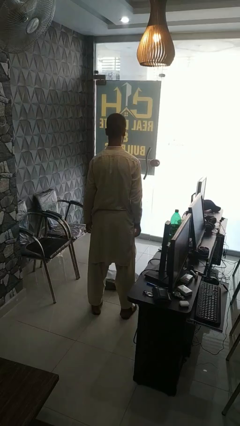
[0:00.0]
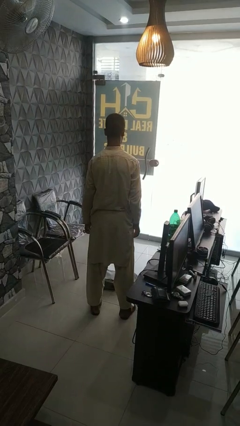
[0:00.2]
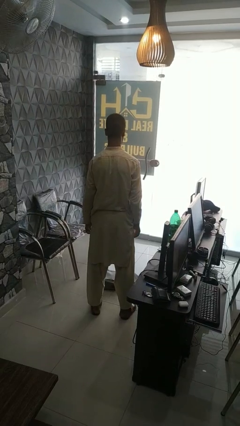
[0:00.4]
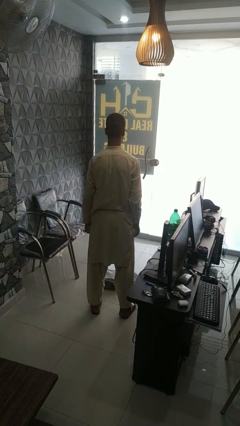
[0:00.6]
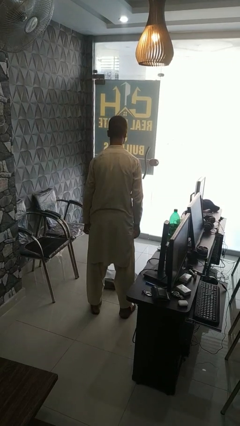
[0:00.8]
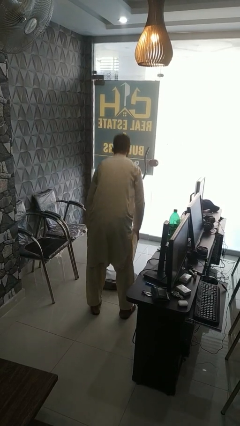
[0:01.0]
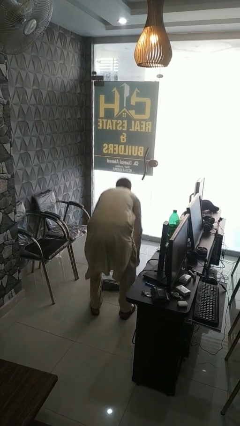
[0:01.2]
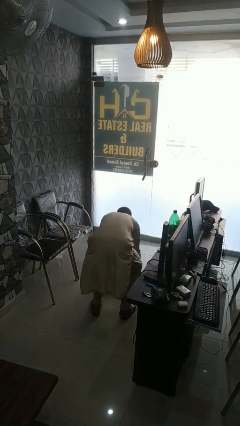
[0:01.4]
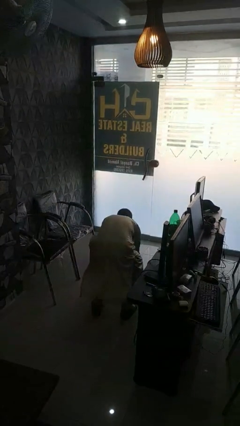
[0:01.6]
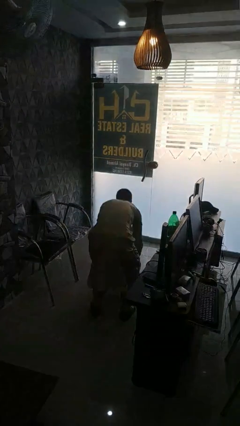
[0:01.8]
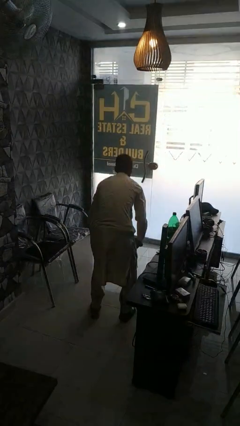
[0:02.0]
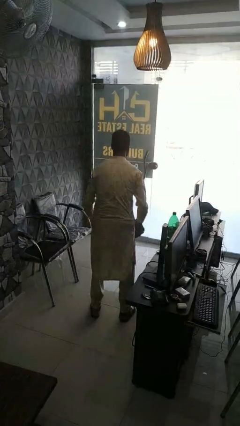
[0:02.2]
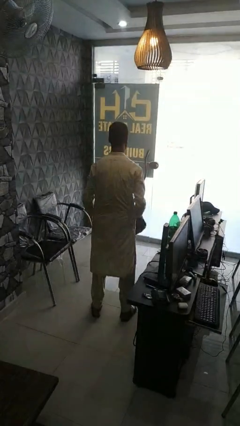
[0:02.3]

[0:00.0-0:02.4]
person picks up object from floor

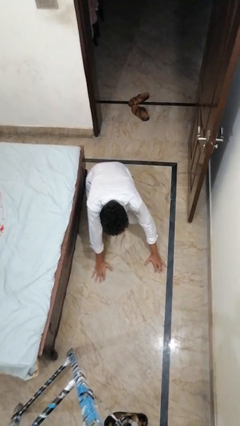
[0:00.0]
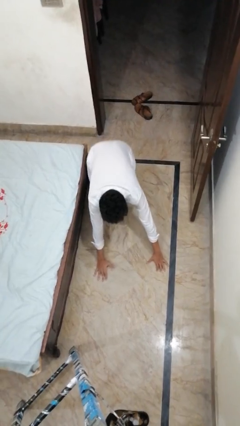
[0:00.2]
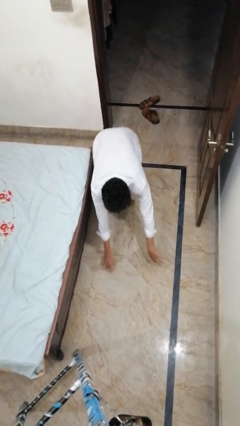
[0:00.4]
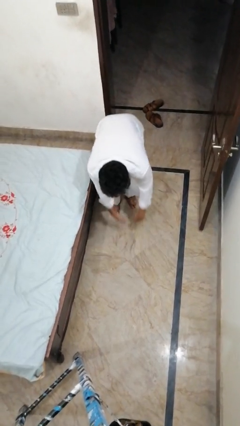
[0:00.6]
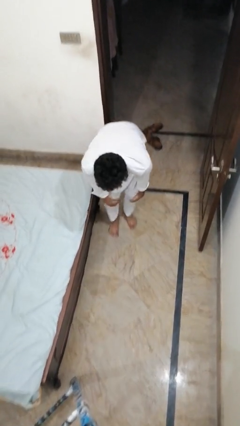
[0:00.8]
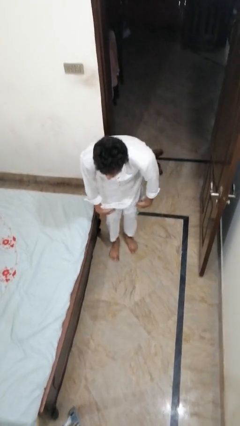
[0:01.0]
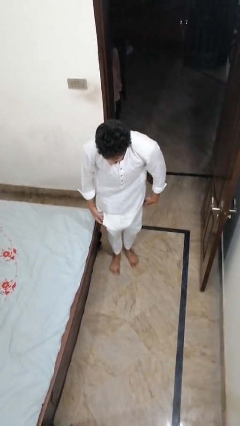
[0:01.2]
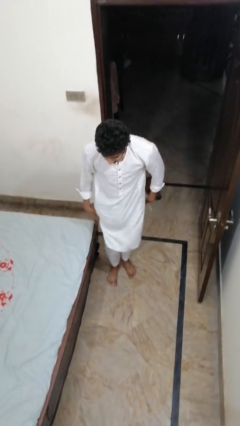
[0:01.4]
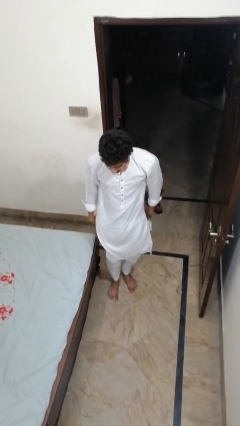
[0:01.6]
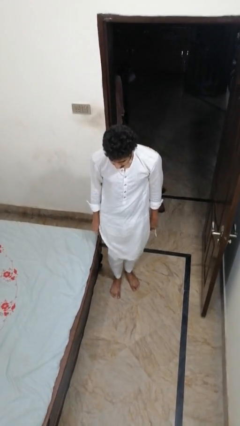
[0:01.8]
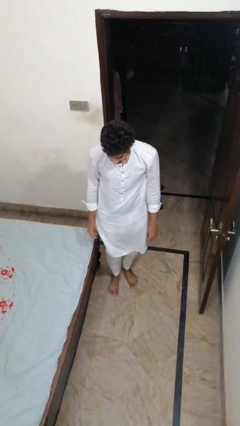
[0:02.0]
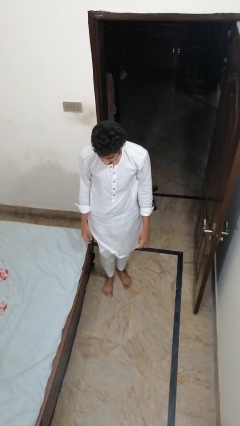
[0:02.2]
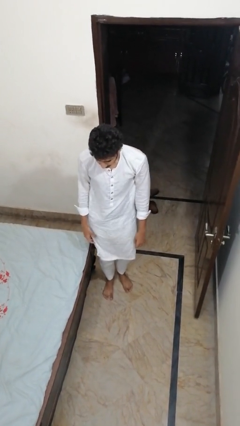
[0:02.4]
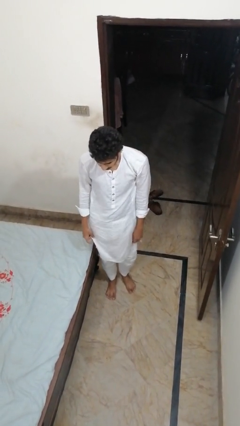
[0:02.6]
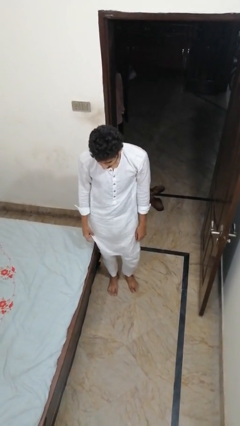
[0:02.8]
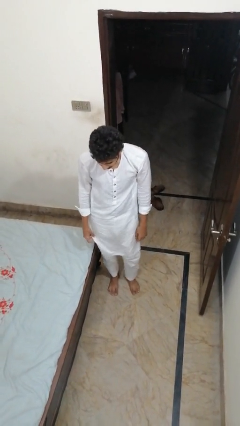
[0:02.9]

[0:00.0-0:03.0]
person stands up from floor

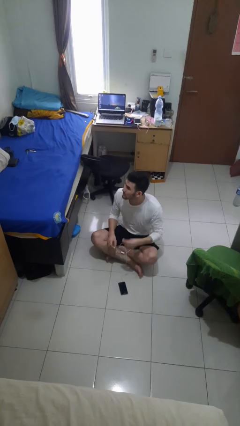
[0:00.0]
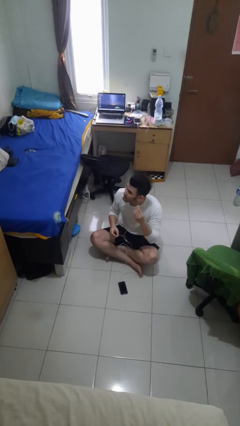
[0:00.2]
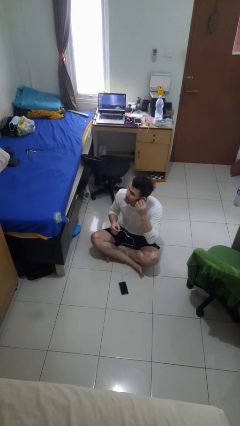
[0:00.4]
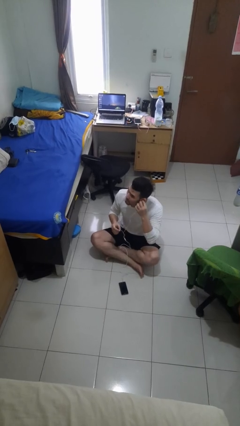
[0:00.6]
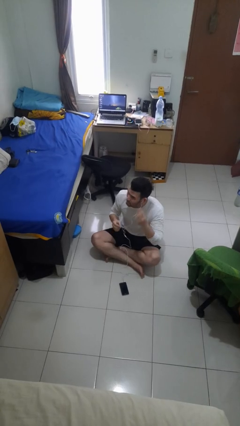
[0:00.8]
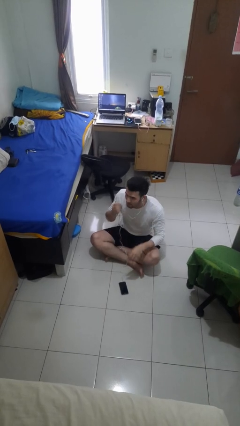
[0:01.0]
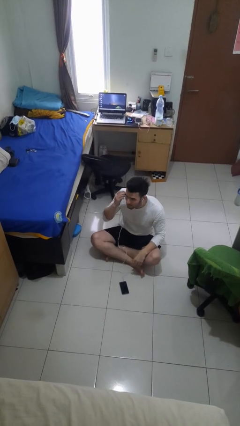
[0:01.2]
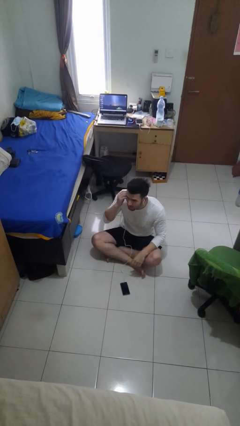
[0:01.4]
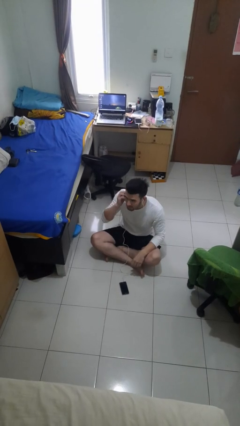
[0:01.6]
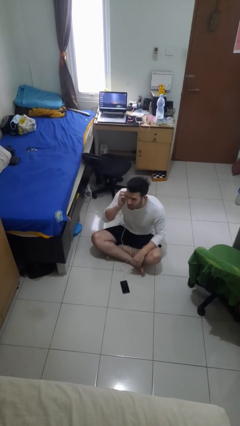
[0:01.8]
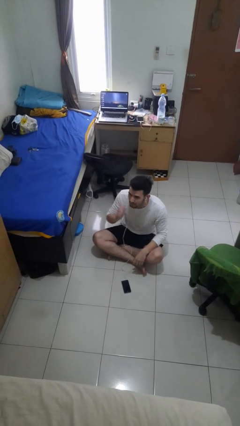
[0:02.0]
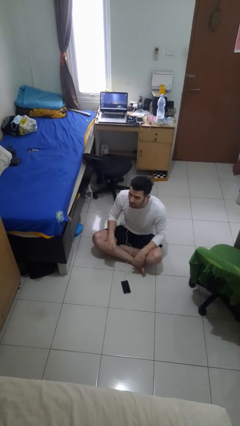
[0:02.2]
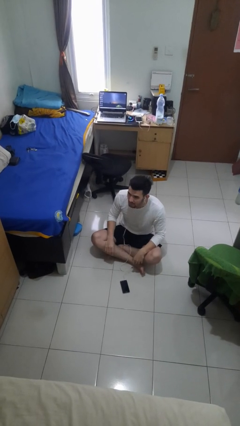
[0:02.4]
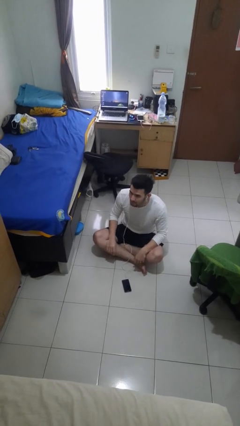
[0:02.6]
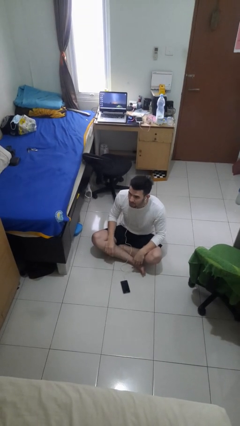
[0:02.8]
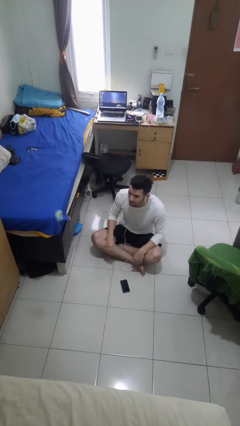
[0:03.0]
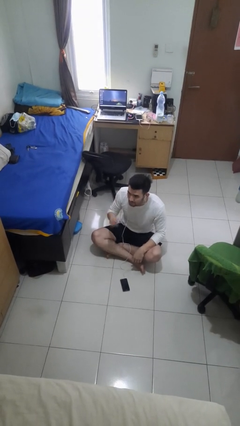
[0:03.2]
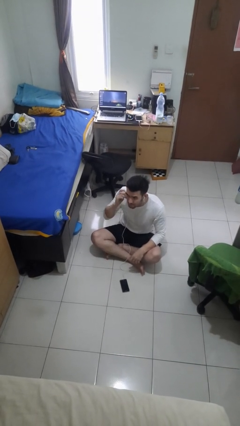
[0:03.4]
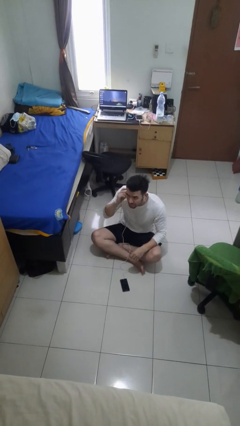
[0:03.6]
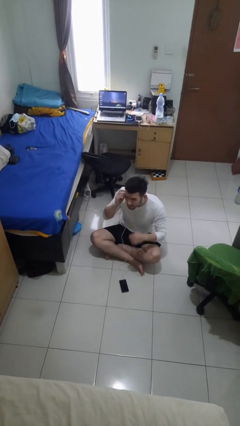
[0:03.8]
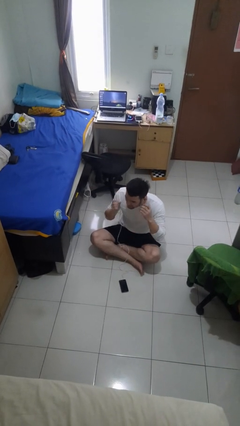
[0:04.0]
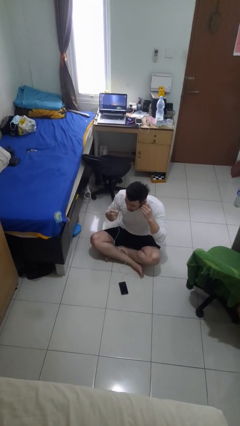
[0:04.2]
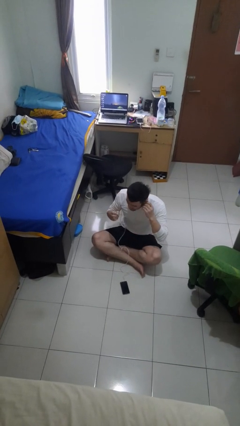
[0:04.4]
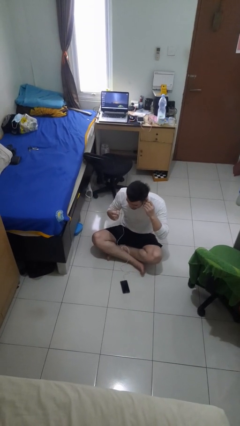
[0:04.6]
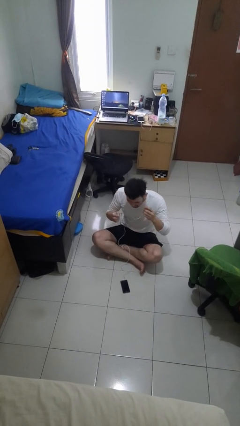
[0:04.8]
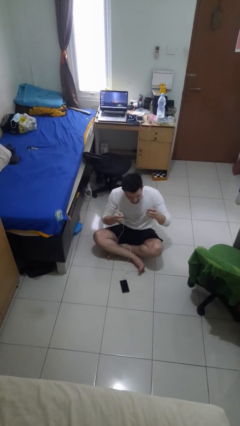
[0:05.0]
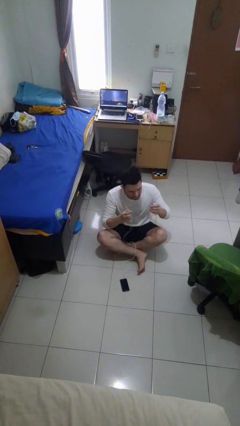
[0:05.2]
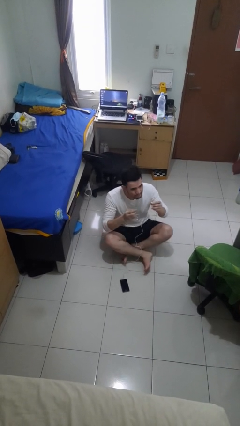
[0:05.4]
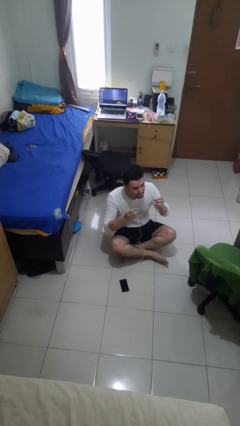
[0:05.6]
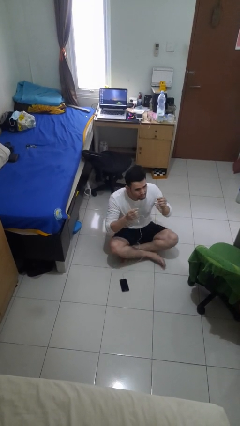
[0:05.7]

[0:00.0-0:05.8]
person puts on headphones

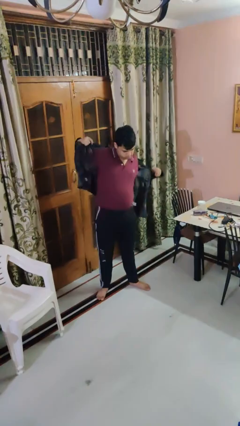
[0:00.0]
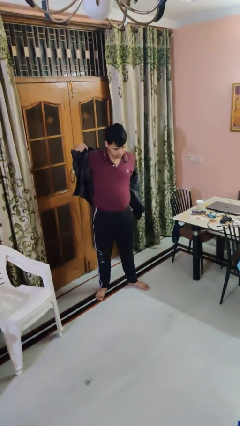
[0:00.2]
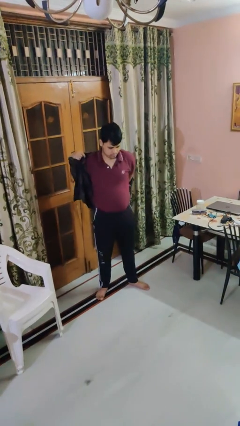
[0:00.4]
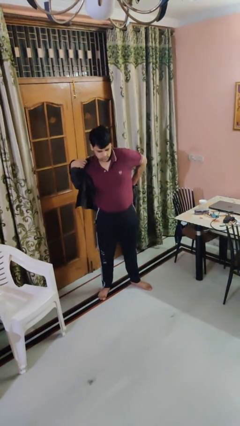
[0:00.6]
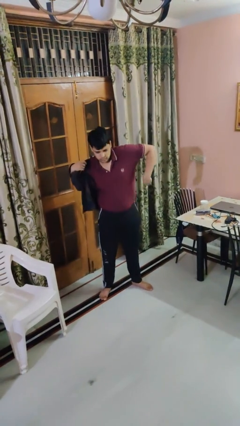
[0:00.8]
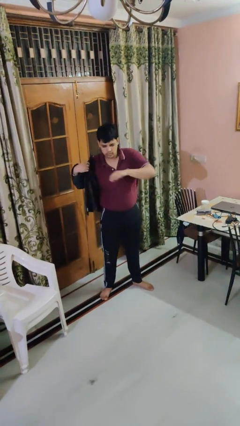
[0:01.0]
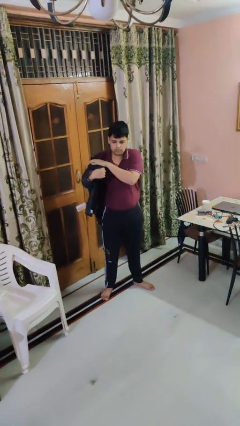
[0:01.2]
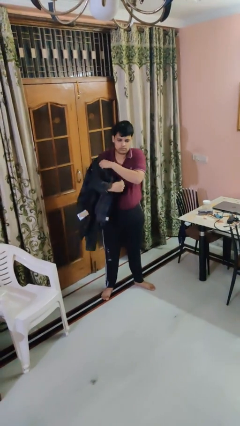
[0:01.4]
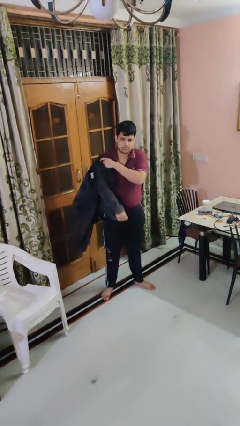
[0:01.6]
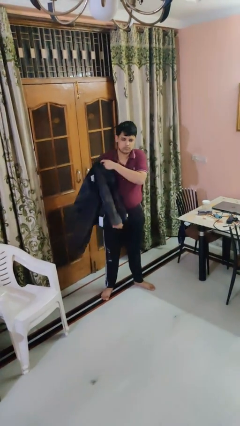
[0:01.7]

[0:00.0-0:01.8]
person takes off shirt

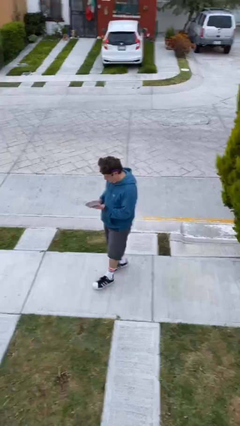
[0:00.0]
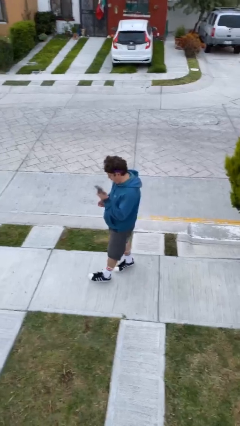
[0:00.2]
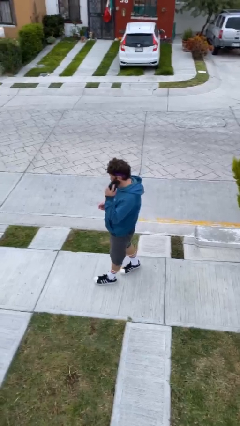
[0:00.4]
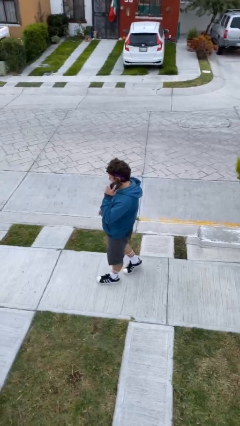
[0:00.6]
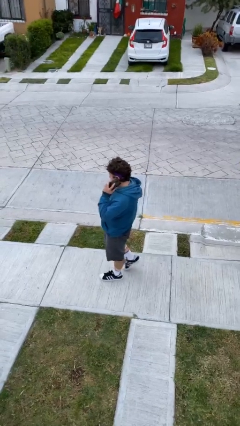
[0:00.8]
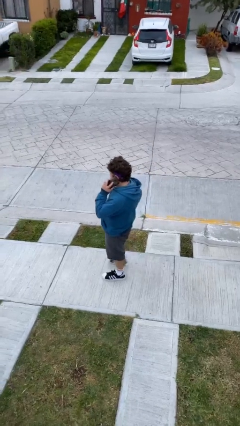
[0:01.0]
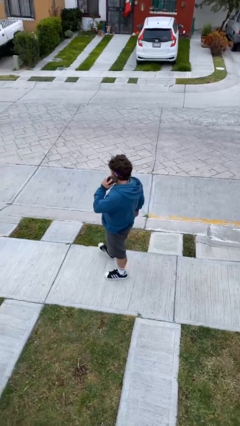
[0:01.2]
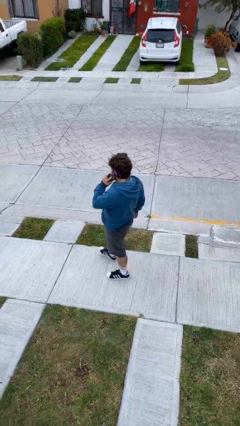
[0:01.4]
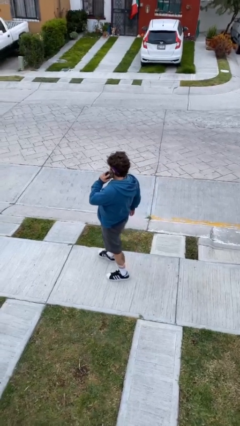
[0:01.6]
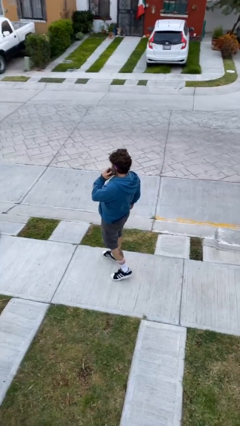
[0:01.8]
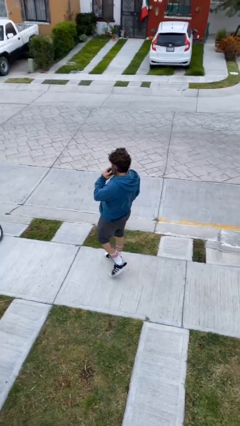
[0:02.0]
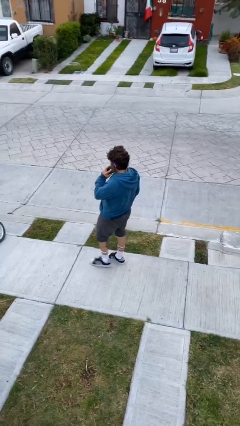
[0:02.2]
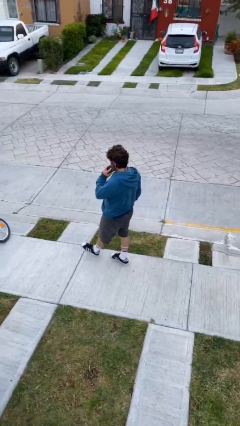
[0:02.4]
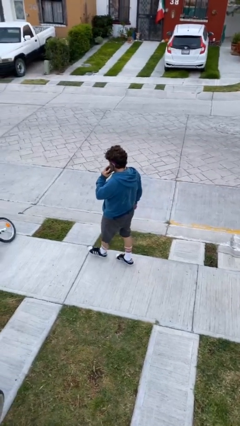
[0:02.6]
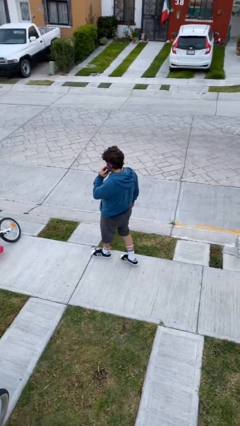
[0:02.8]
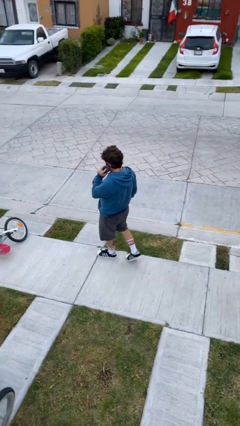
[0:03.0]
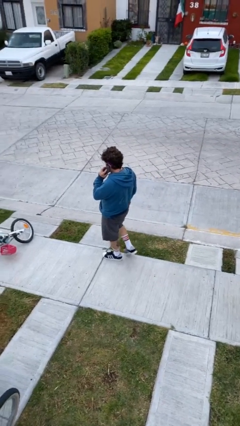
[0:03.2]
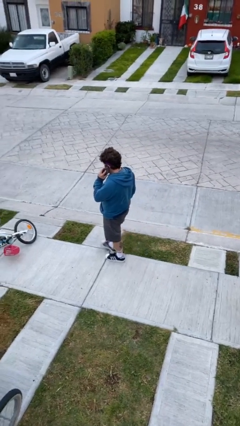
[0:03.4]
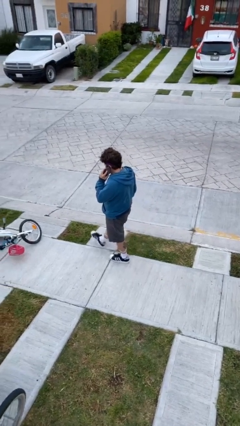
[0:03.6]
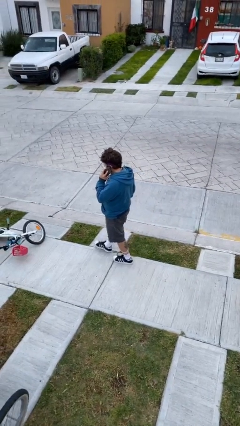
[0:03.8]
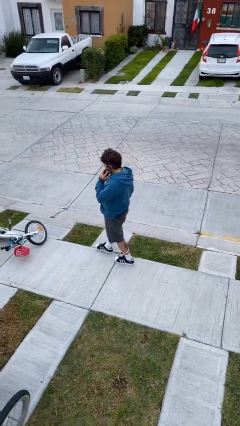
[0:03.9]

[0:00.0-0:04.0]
person talks on phone

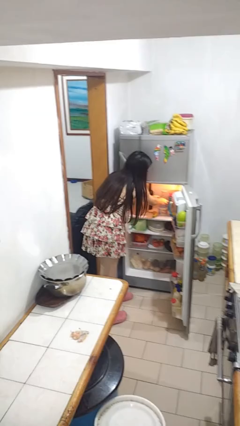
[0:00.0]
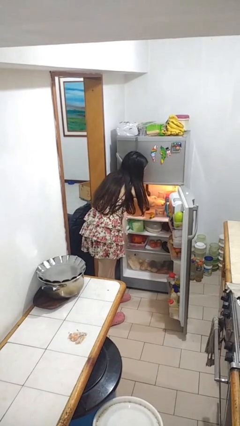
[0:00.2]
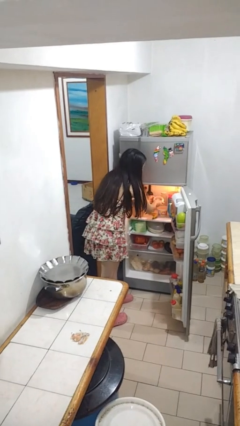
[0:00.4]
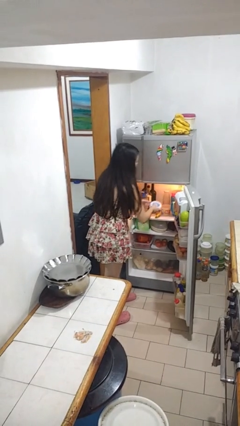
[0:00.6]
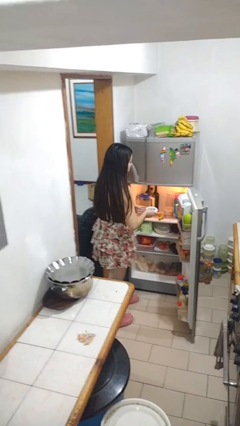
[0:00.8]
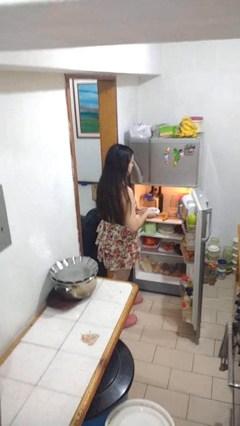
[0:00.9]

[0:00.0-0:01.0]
person takes object from refrigerator
